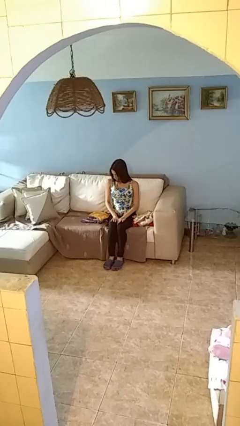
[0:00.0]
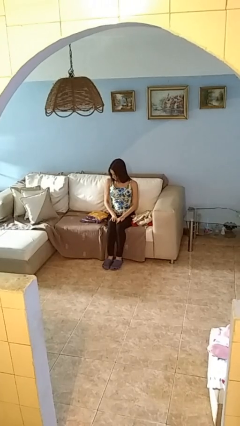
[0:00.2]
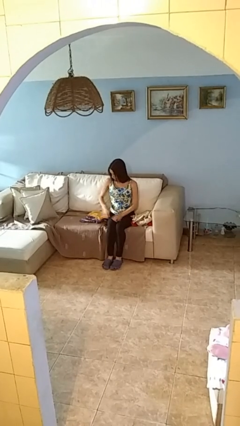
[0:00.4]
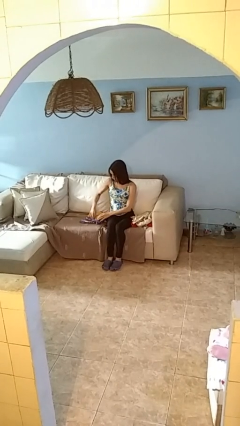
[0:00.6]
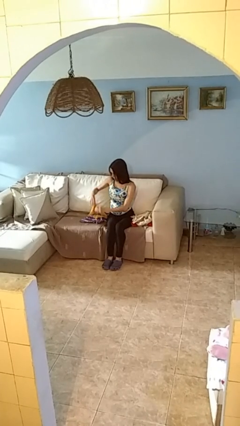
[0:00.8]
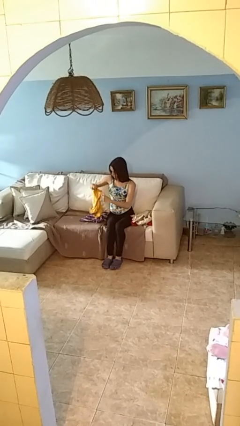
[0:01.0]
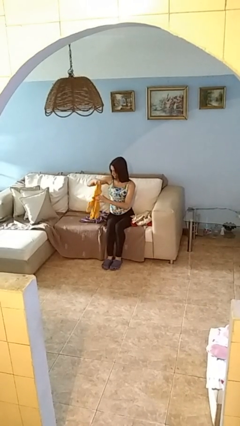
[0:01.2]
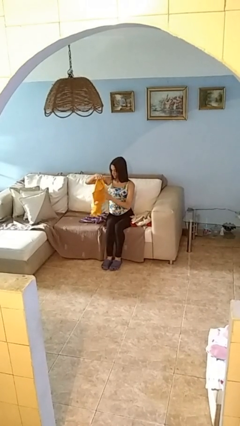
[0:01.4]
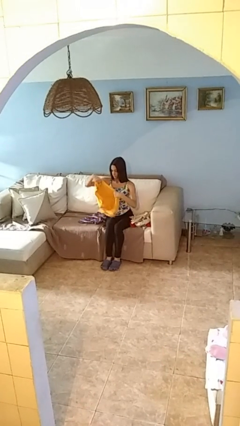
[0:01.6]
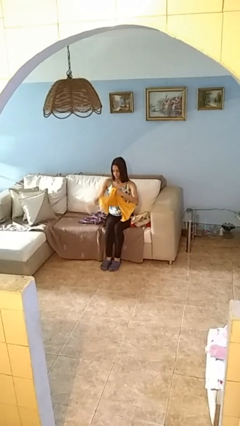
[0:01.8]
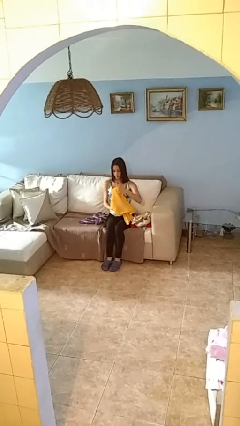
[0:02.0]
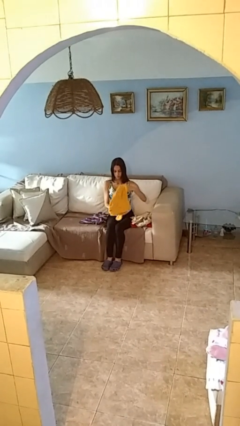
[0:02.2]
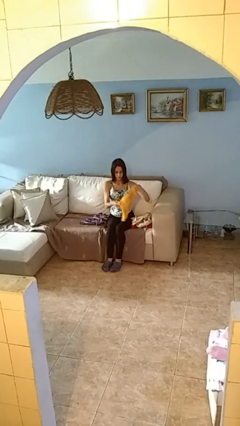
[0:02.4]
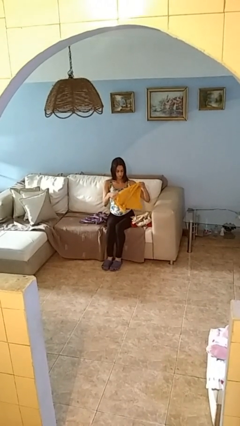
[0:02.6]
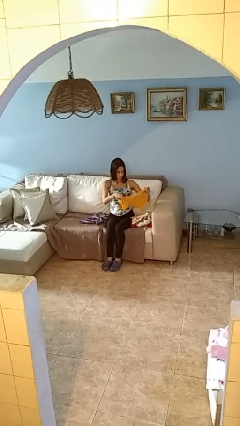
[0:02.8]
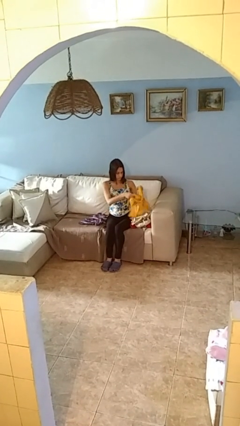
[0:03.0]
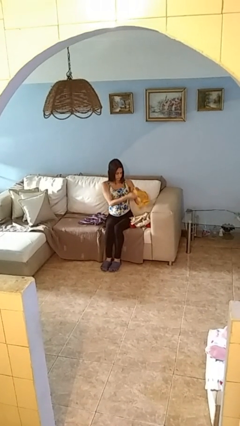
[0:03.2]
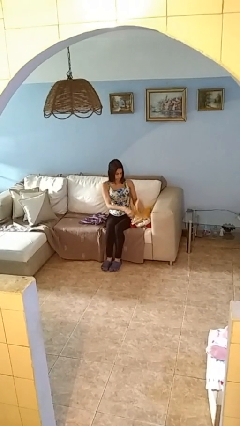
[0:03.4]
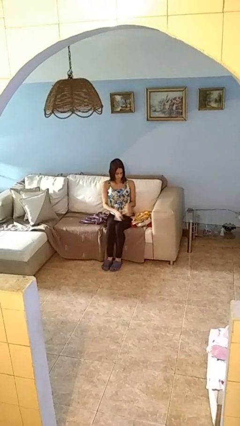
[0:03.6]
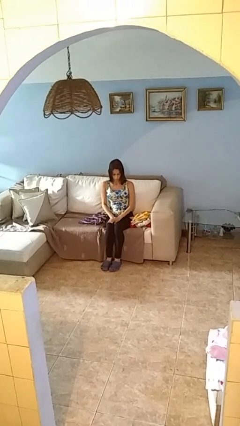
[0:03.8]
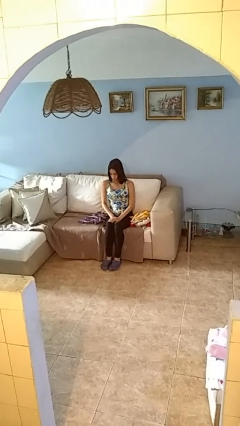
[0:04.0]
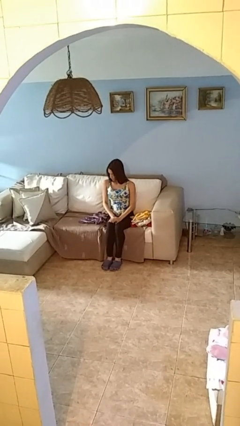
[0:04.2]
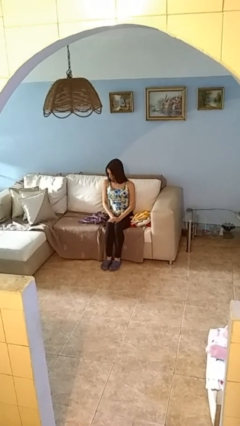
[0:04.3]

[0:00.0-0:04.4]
person folds shirt

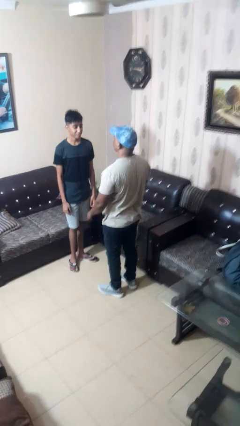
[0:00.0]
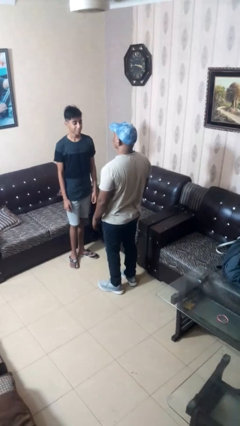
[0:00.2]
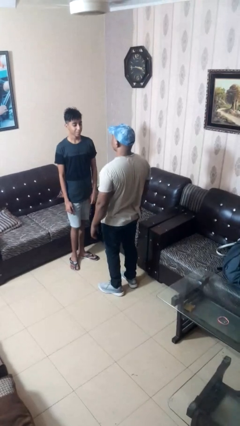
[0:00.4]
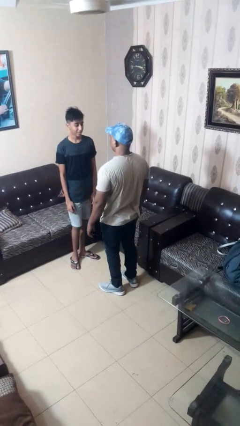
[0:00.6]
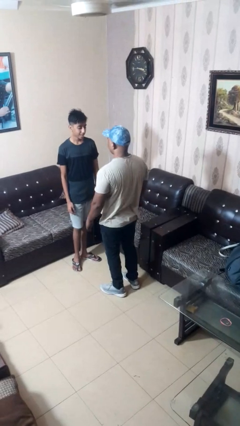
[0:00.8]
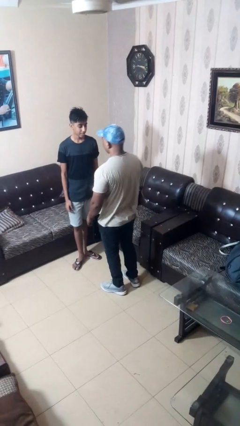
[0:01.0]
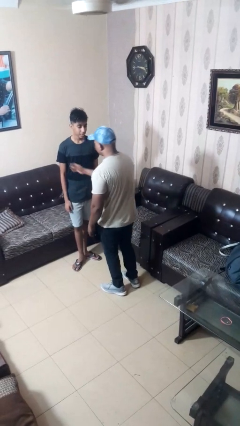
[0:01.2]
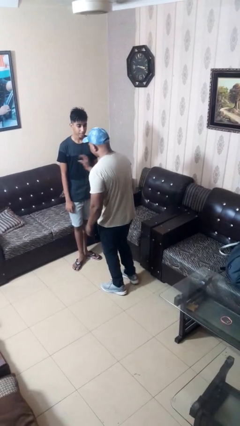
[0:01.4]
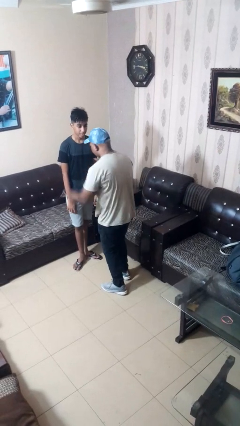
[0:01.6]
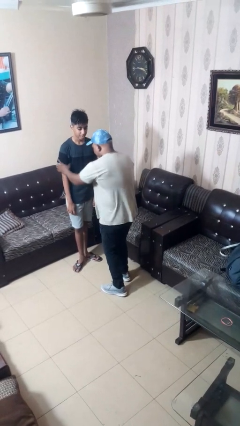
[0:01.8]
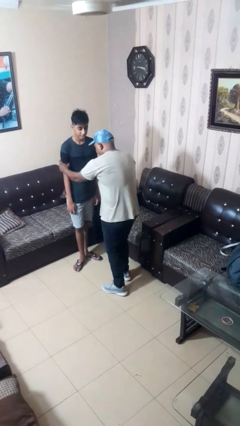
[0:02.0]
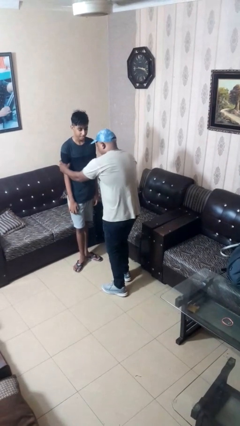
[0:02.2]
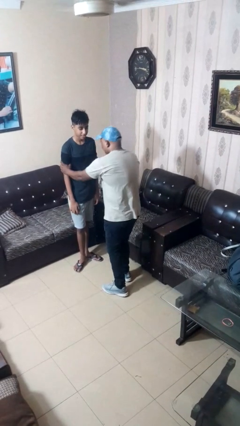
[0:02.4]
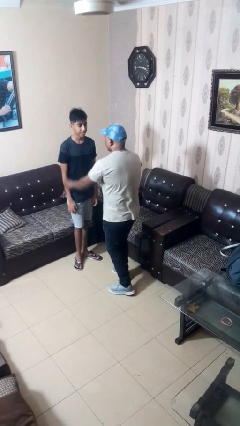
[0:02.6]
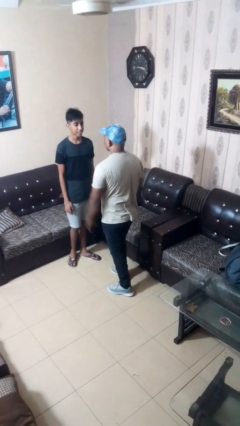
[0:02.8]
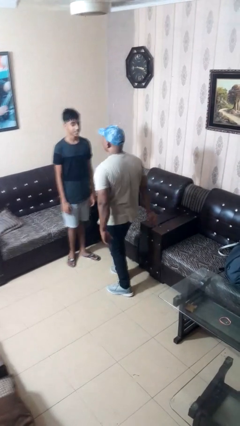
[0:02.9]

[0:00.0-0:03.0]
person grabs person by bicep

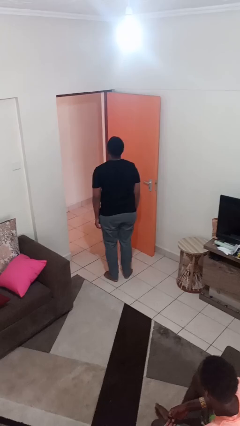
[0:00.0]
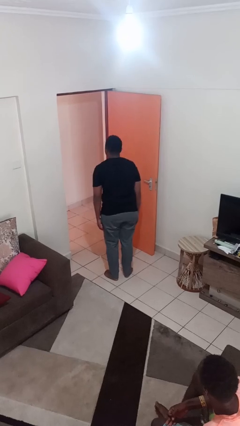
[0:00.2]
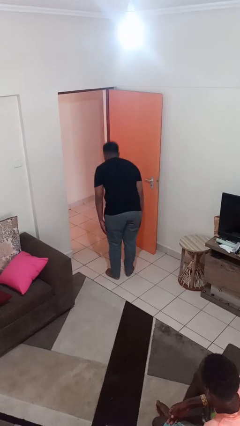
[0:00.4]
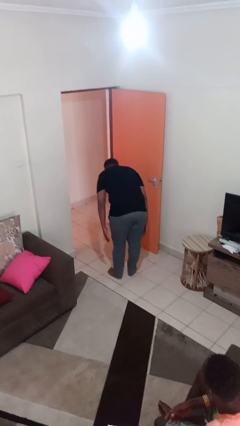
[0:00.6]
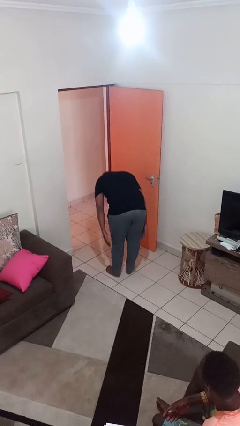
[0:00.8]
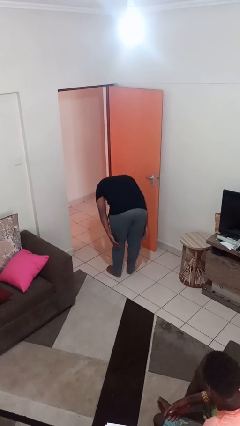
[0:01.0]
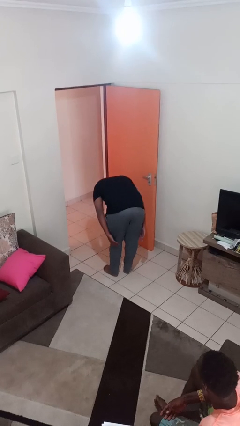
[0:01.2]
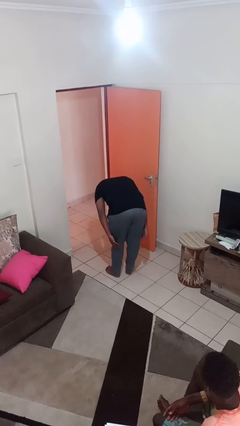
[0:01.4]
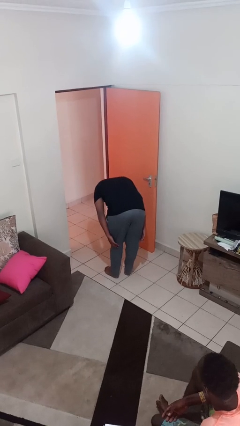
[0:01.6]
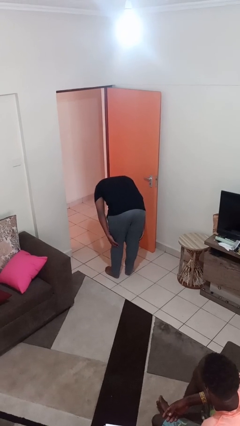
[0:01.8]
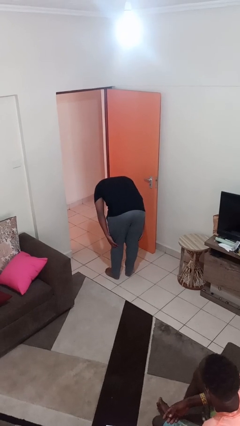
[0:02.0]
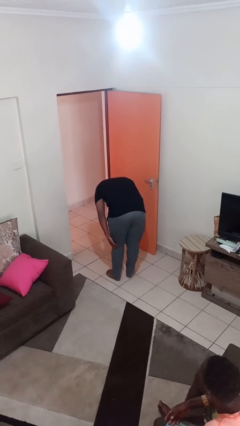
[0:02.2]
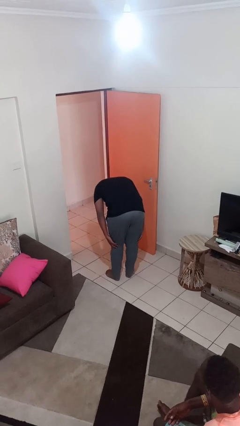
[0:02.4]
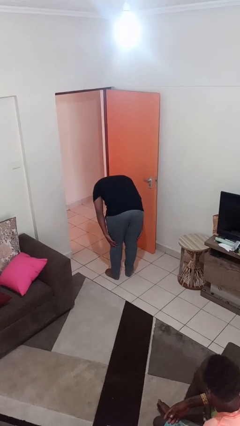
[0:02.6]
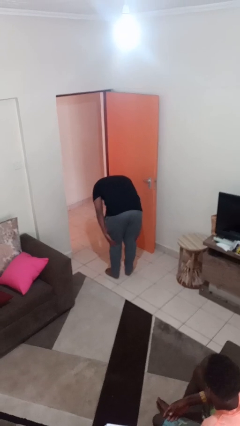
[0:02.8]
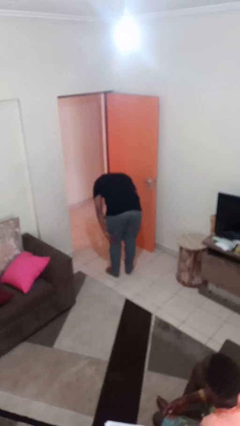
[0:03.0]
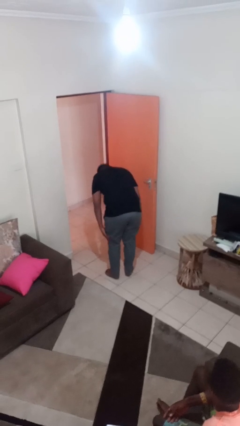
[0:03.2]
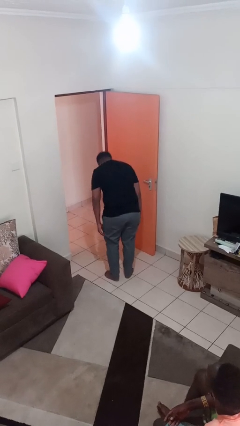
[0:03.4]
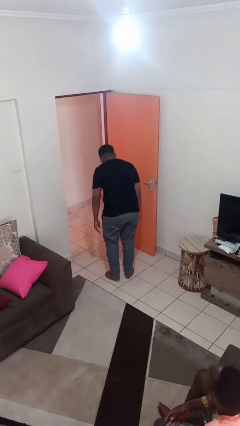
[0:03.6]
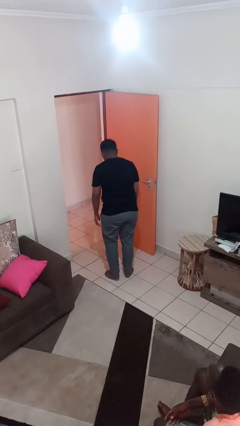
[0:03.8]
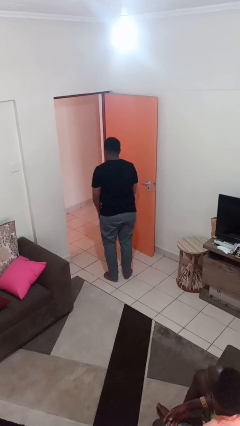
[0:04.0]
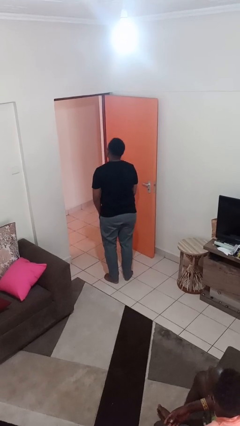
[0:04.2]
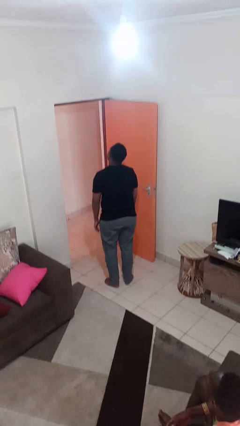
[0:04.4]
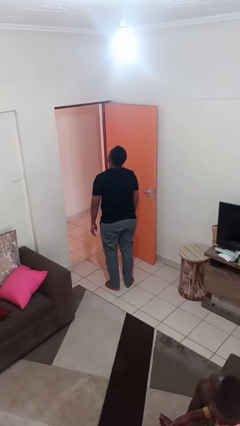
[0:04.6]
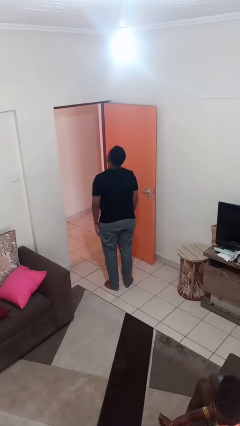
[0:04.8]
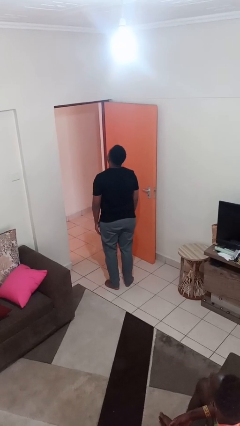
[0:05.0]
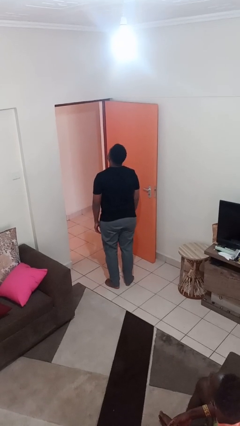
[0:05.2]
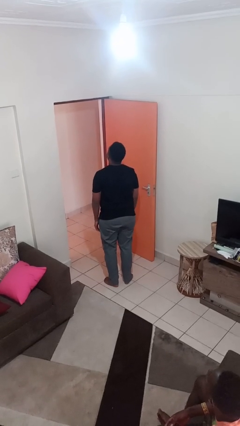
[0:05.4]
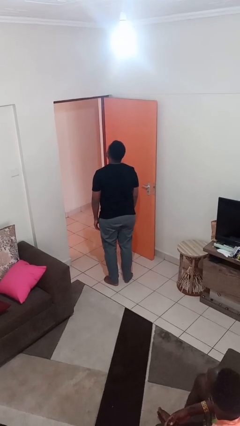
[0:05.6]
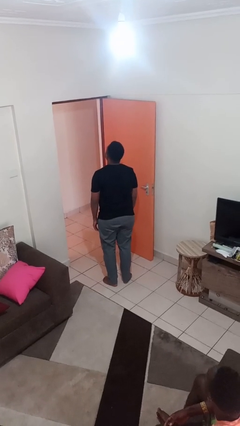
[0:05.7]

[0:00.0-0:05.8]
person bows

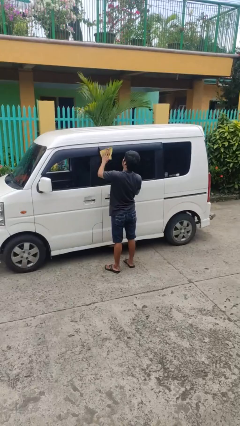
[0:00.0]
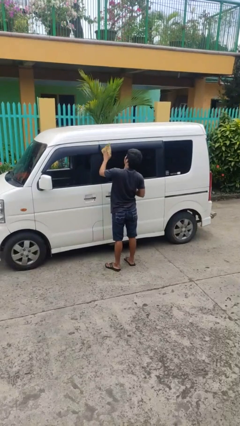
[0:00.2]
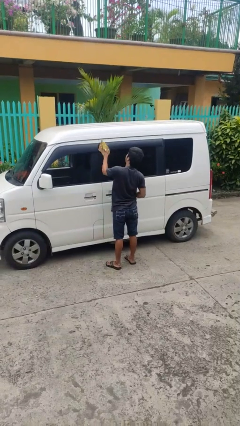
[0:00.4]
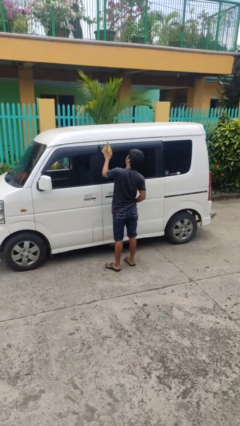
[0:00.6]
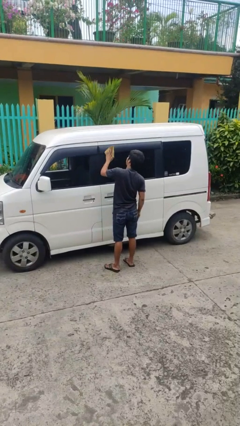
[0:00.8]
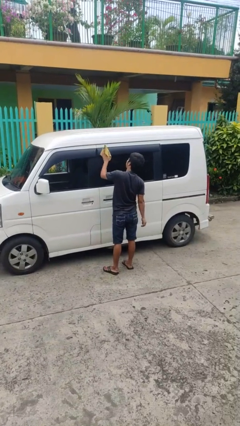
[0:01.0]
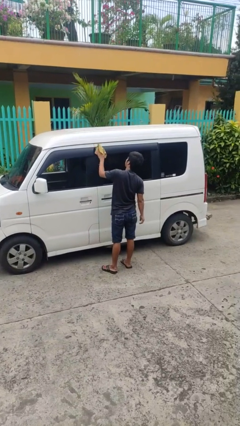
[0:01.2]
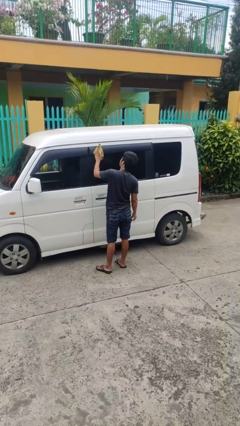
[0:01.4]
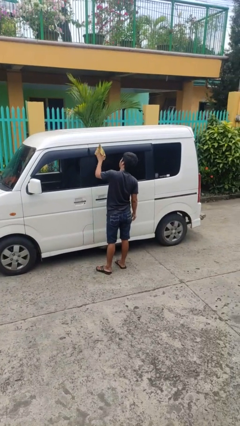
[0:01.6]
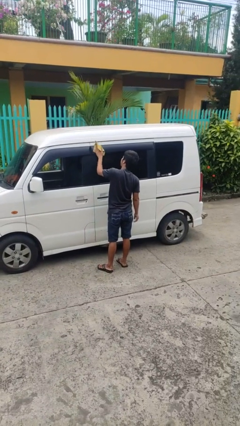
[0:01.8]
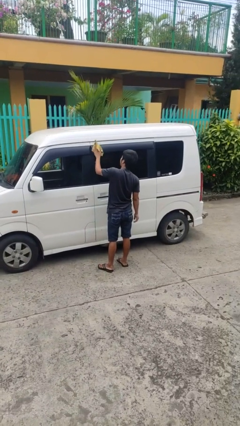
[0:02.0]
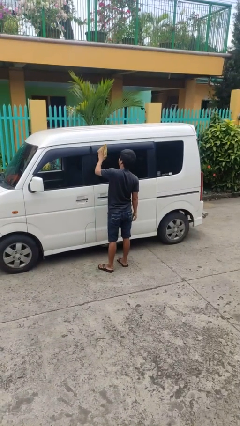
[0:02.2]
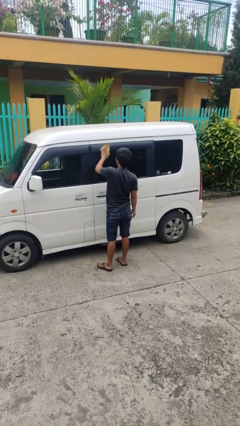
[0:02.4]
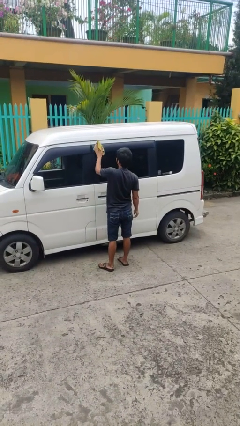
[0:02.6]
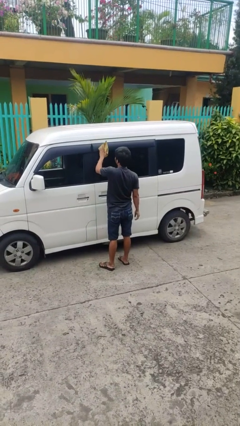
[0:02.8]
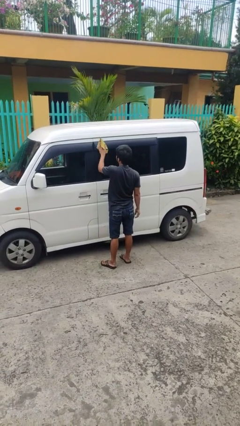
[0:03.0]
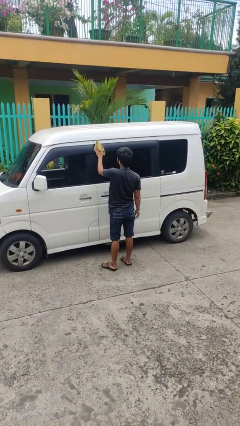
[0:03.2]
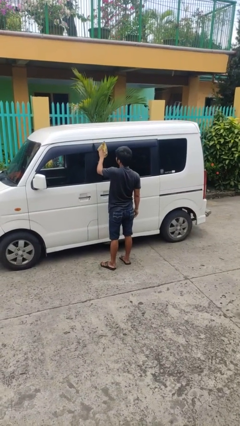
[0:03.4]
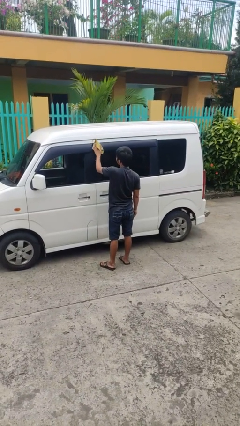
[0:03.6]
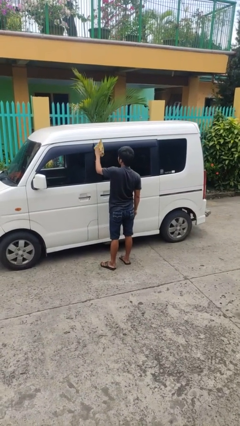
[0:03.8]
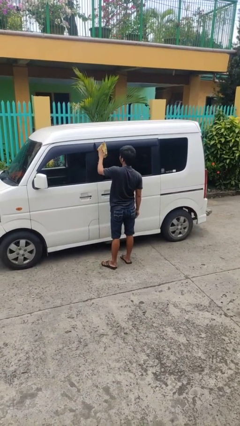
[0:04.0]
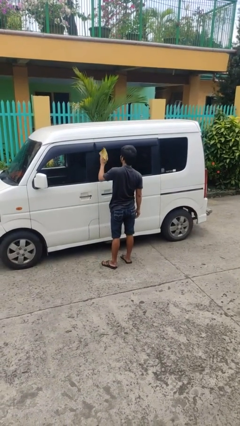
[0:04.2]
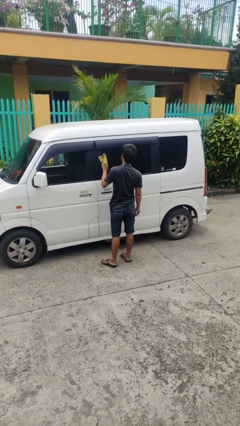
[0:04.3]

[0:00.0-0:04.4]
person polishes car with rag
